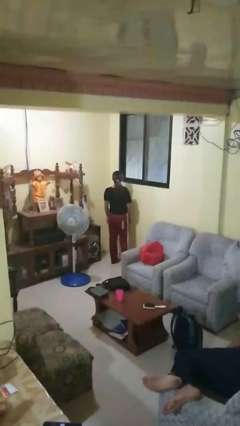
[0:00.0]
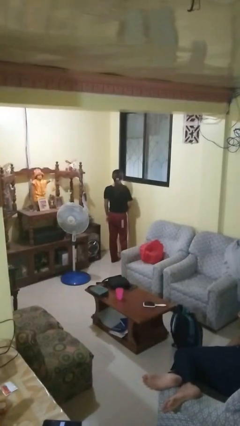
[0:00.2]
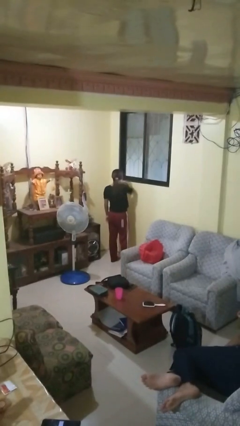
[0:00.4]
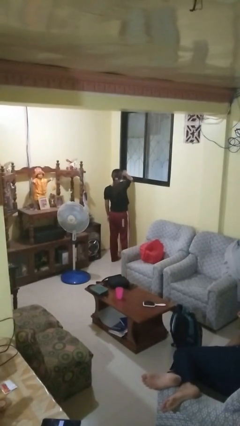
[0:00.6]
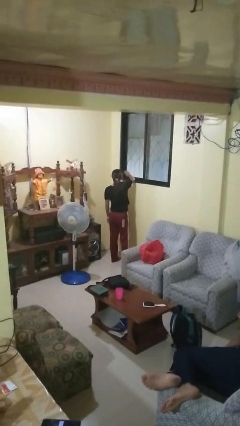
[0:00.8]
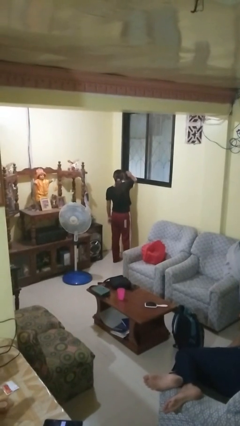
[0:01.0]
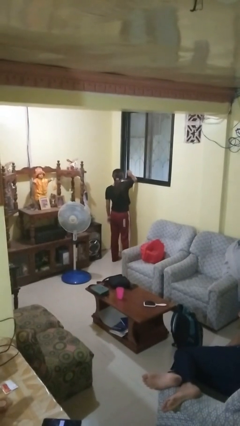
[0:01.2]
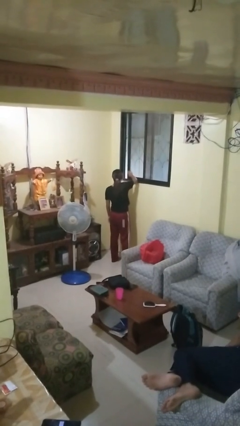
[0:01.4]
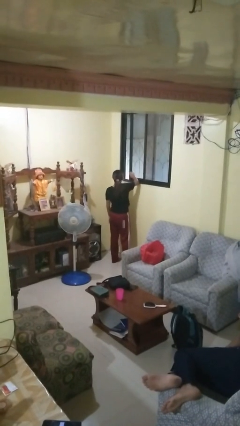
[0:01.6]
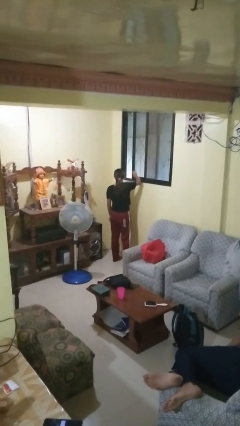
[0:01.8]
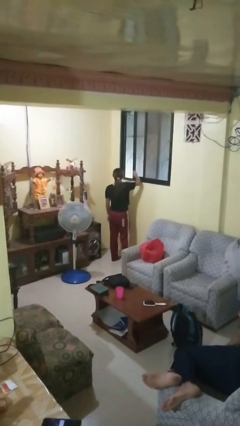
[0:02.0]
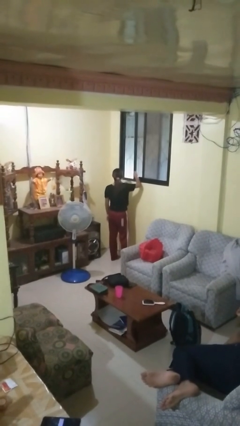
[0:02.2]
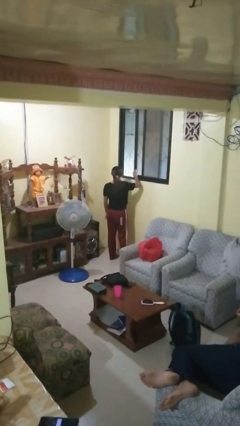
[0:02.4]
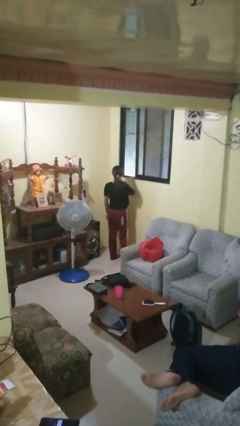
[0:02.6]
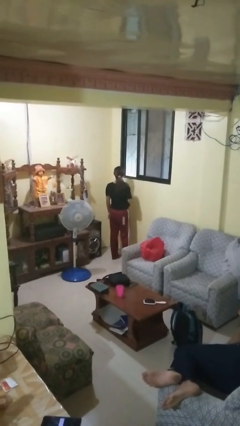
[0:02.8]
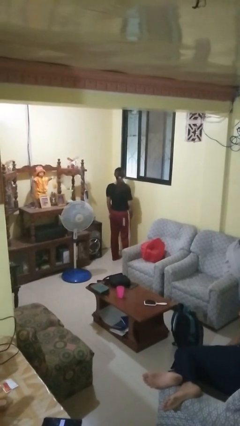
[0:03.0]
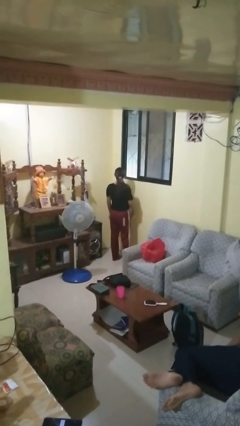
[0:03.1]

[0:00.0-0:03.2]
person opens home window

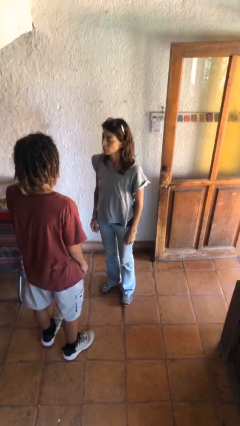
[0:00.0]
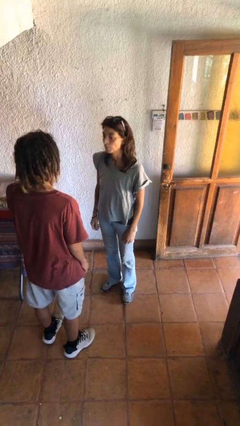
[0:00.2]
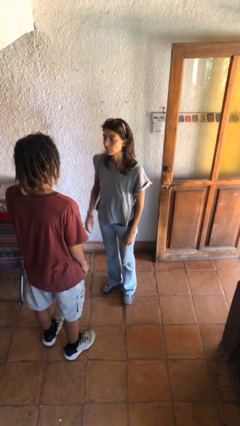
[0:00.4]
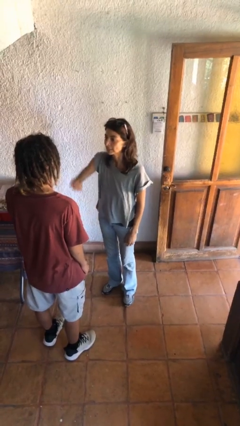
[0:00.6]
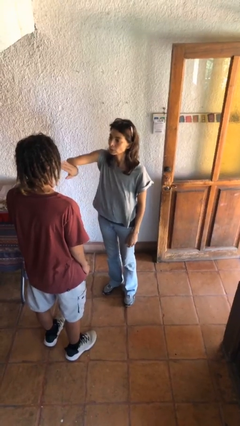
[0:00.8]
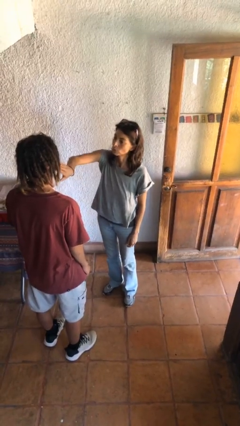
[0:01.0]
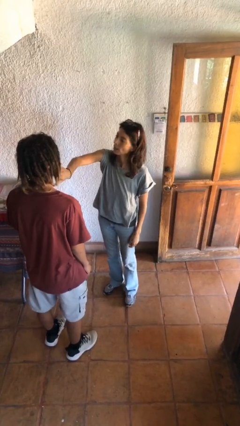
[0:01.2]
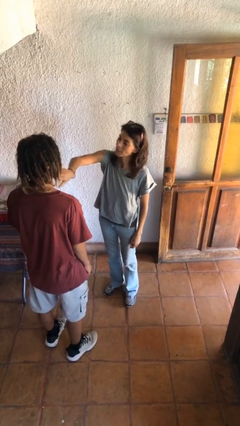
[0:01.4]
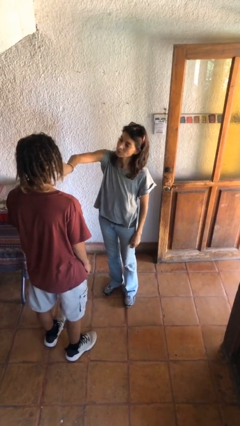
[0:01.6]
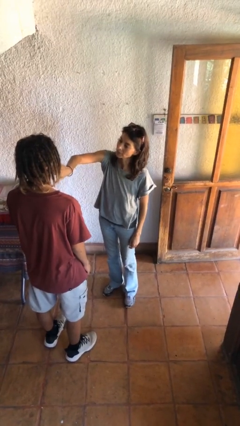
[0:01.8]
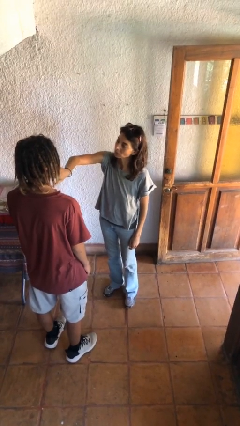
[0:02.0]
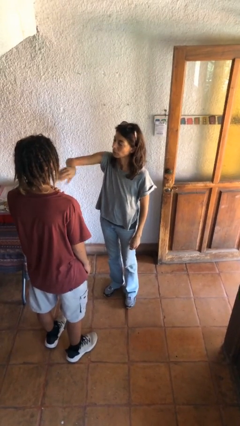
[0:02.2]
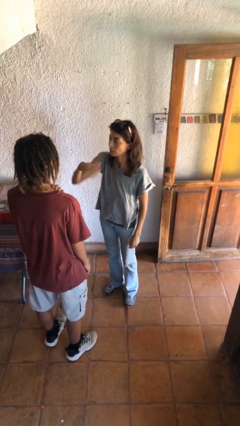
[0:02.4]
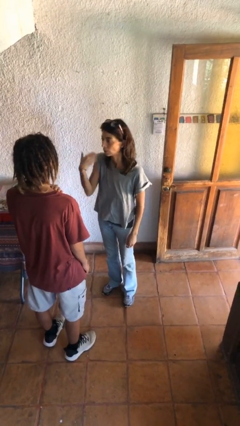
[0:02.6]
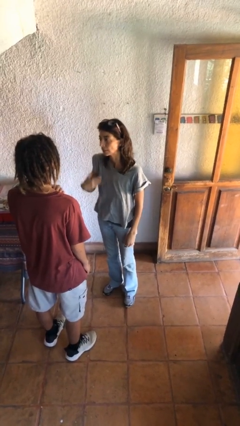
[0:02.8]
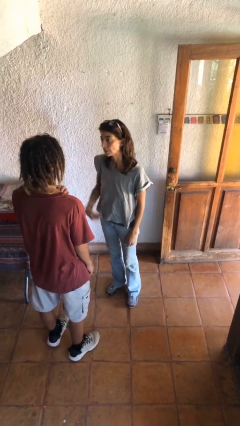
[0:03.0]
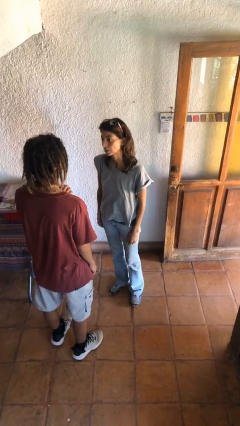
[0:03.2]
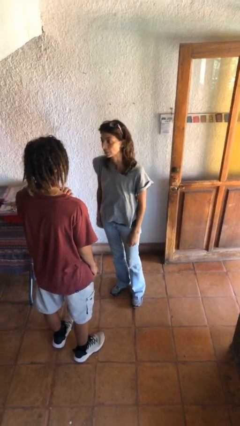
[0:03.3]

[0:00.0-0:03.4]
person touches face of person

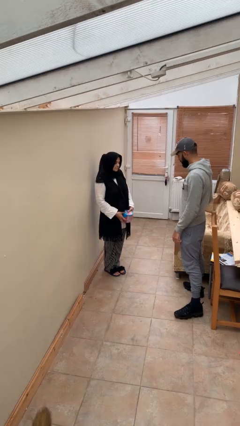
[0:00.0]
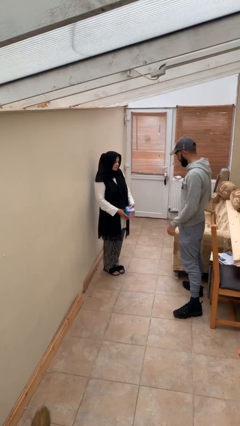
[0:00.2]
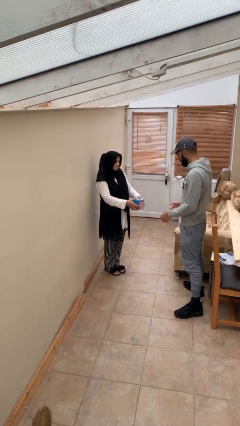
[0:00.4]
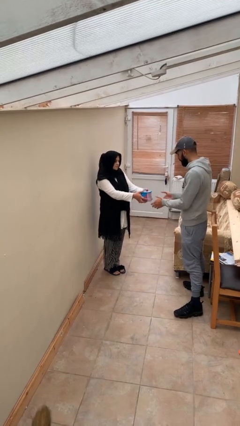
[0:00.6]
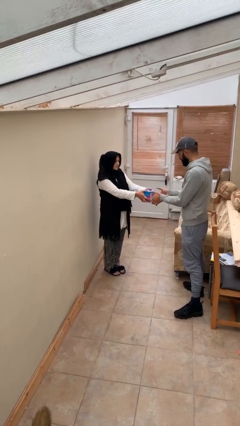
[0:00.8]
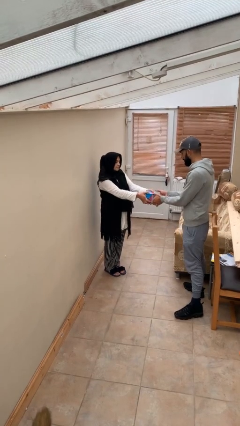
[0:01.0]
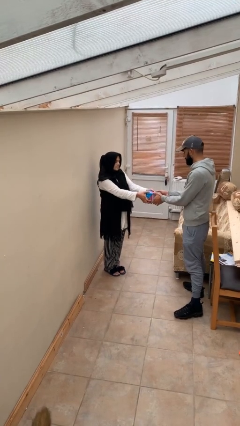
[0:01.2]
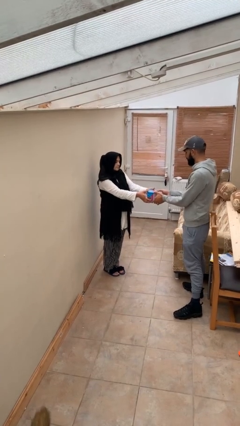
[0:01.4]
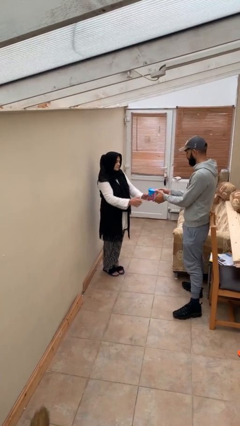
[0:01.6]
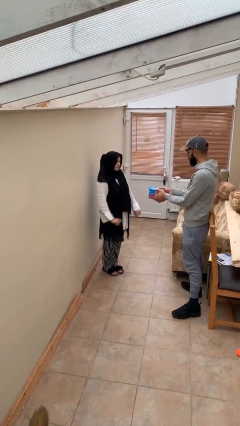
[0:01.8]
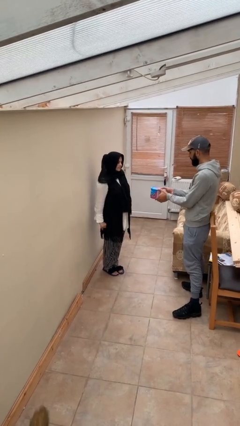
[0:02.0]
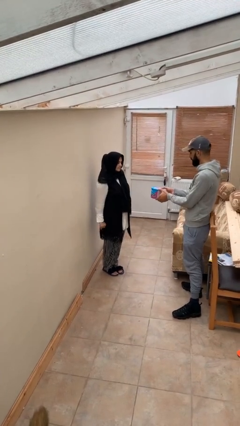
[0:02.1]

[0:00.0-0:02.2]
person transfers object to person

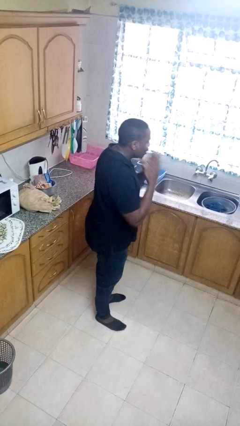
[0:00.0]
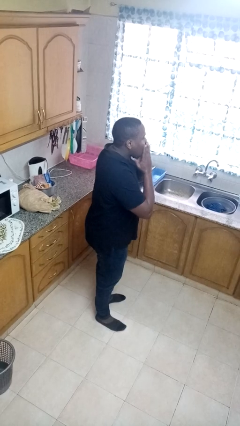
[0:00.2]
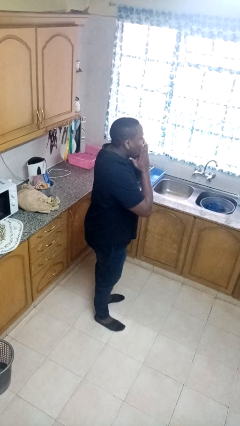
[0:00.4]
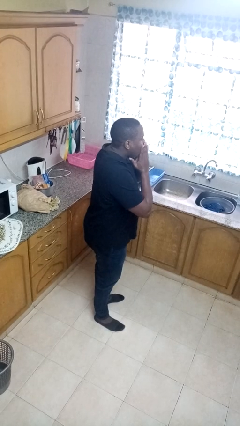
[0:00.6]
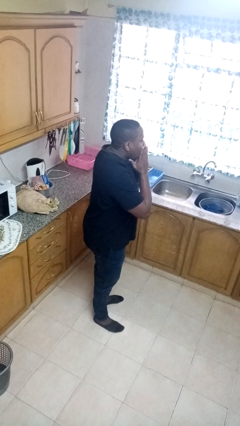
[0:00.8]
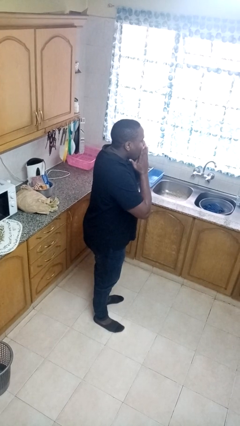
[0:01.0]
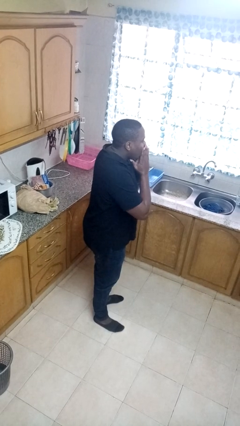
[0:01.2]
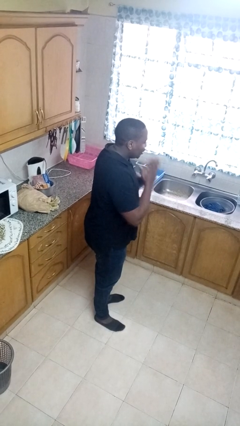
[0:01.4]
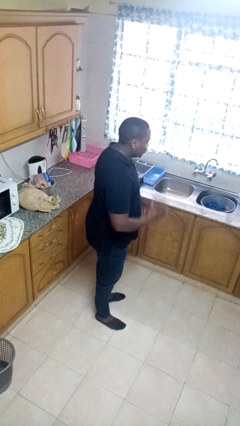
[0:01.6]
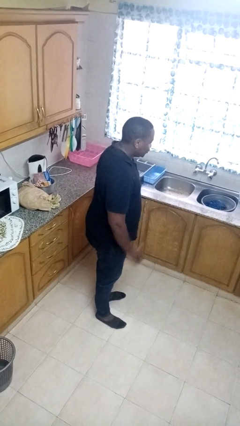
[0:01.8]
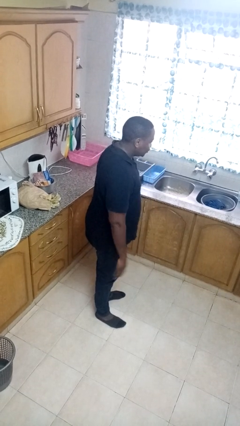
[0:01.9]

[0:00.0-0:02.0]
person yawns

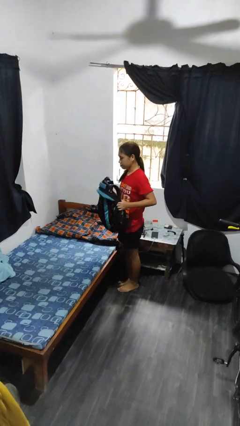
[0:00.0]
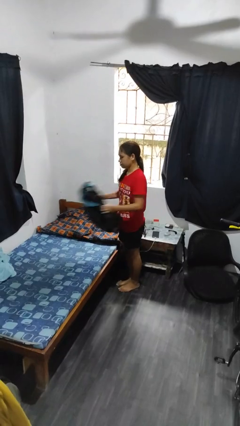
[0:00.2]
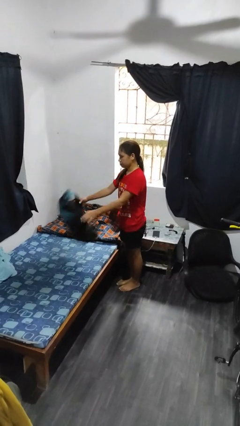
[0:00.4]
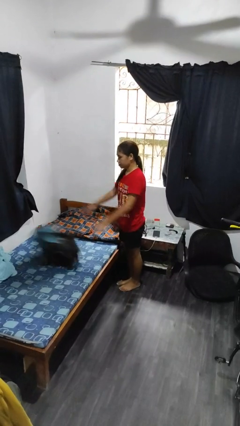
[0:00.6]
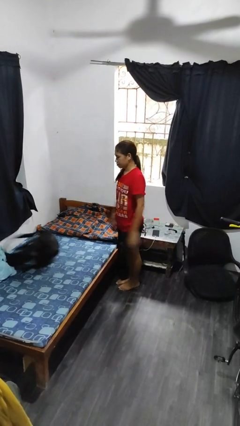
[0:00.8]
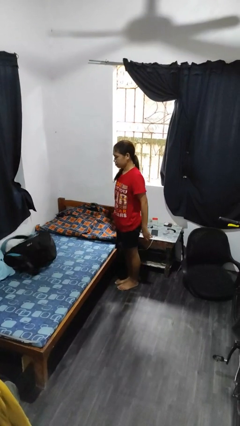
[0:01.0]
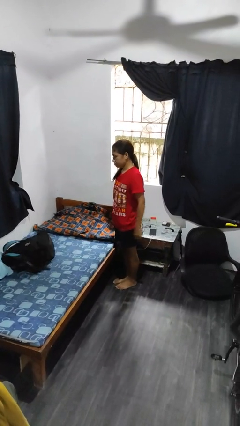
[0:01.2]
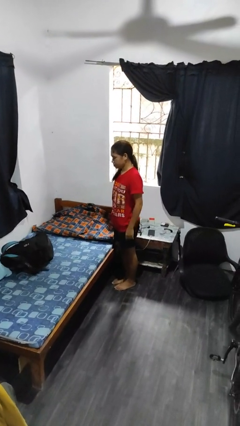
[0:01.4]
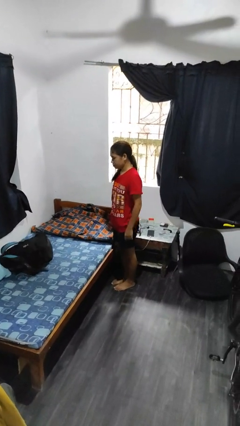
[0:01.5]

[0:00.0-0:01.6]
person throws object on bed

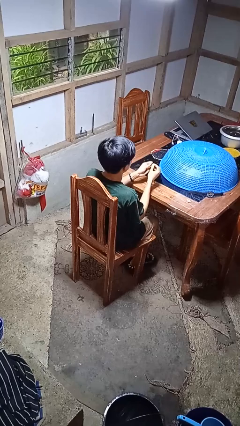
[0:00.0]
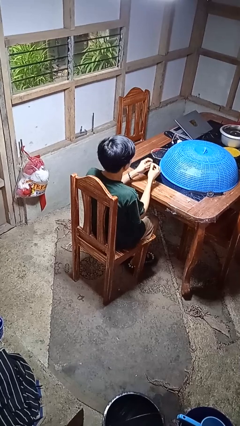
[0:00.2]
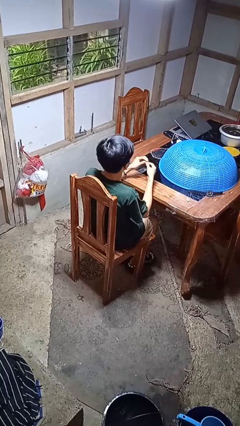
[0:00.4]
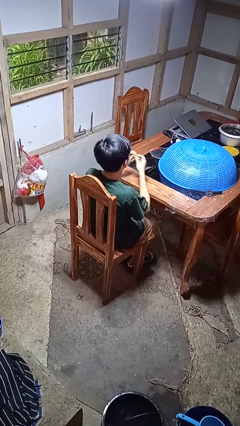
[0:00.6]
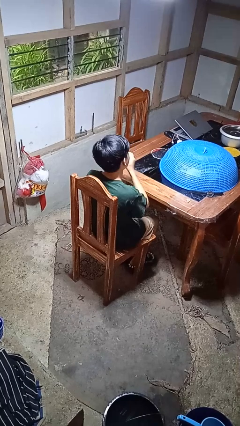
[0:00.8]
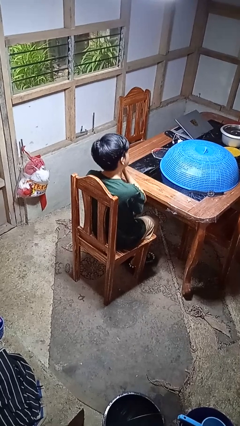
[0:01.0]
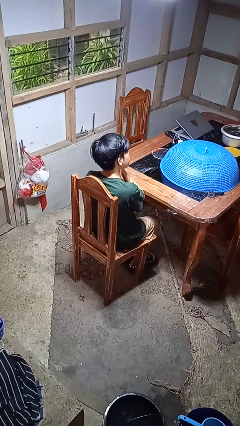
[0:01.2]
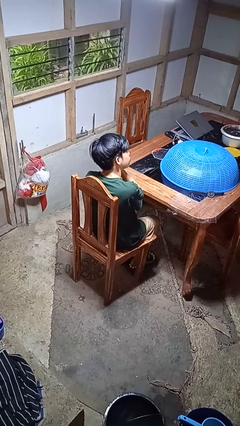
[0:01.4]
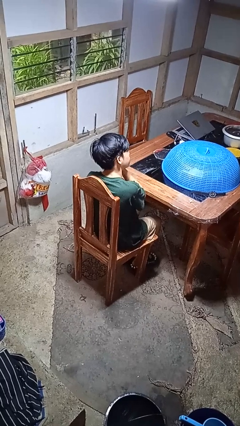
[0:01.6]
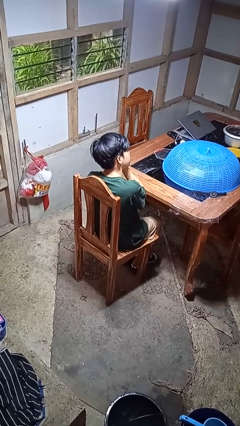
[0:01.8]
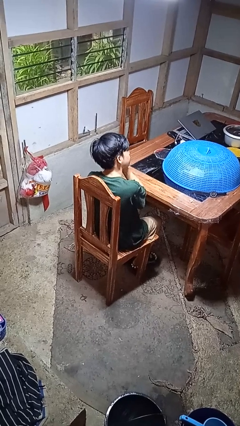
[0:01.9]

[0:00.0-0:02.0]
person puts on earrings

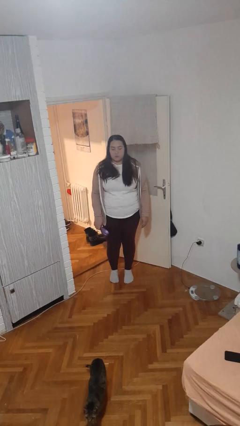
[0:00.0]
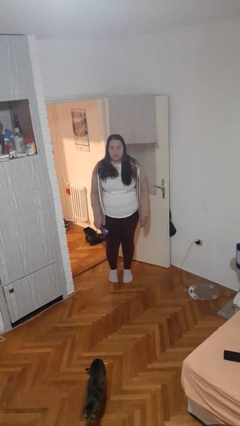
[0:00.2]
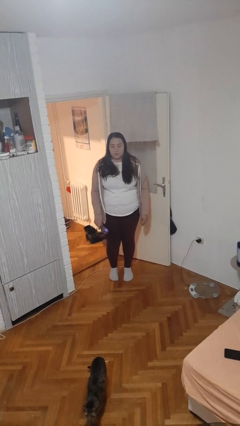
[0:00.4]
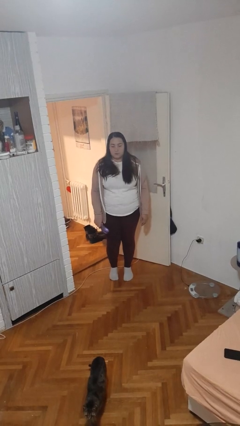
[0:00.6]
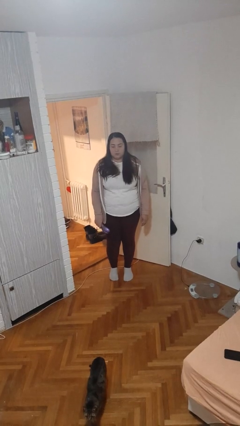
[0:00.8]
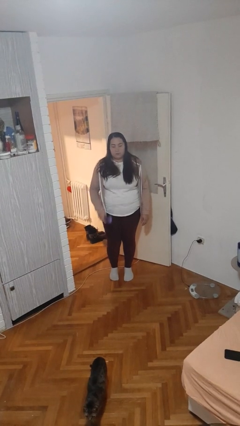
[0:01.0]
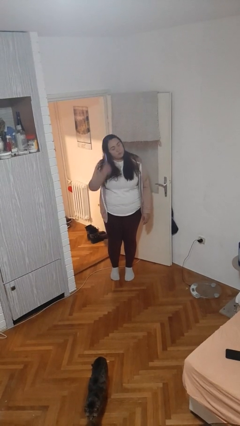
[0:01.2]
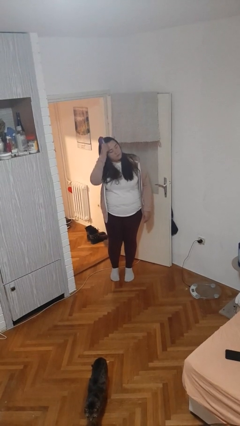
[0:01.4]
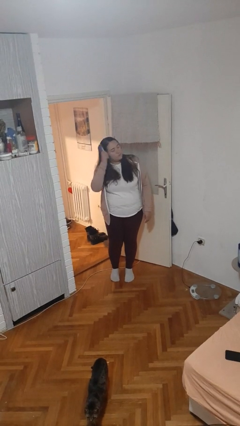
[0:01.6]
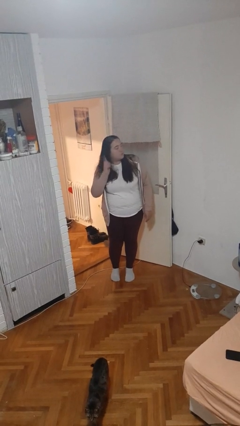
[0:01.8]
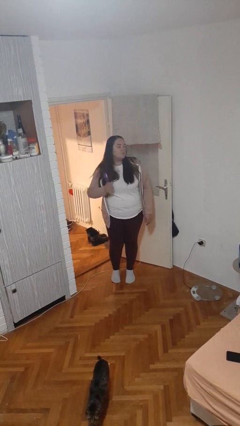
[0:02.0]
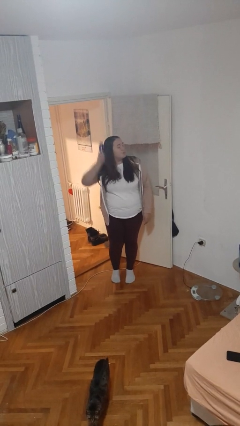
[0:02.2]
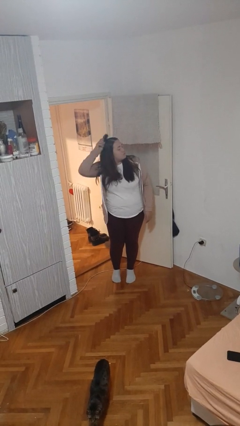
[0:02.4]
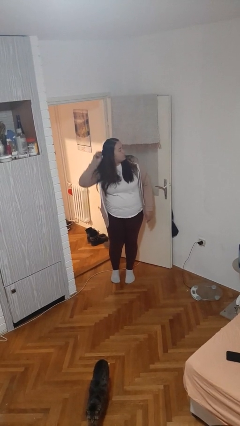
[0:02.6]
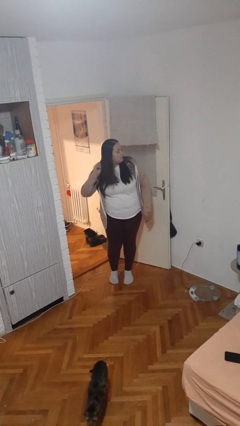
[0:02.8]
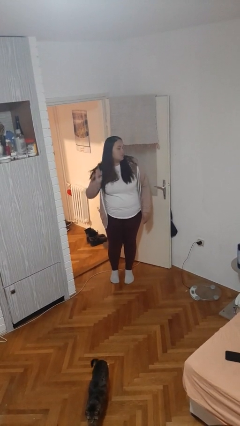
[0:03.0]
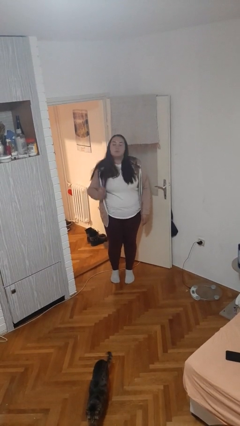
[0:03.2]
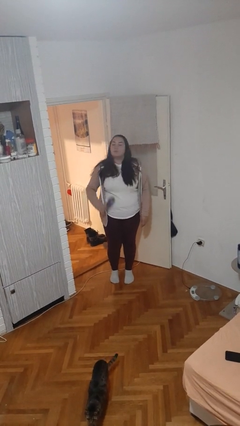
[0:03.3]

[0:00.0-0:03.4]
person brushes hair
